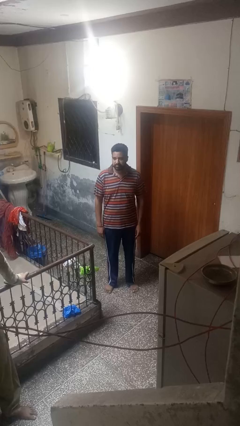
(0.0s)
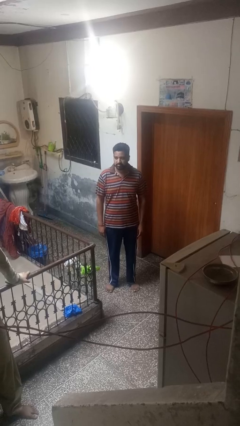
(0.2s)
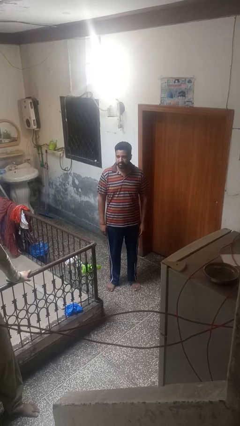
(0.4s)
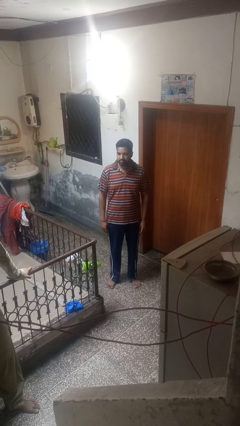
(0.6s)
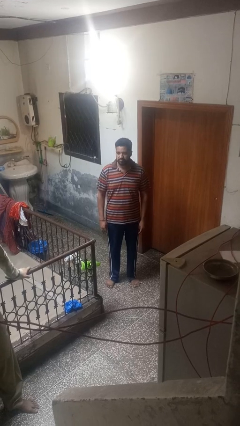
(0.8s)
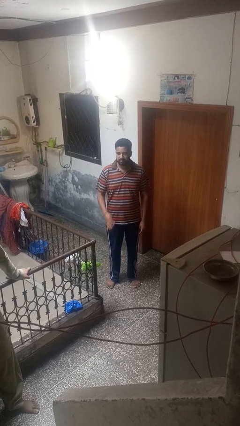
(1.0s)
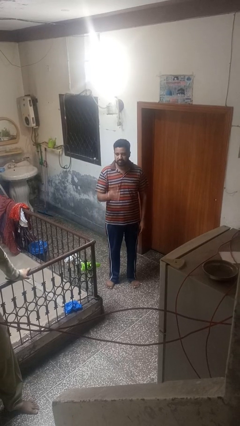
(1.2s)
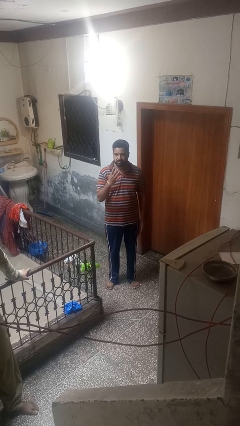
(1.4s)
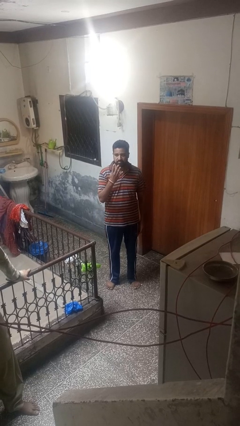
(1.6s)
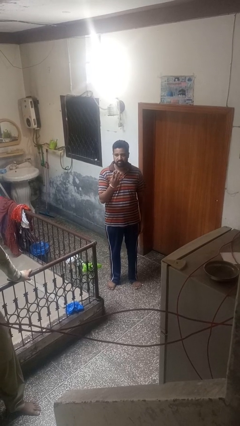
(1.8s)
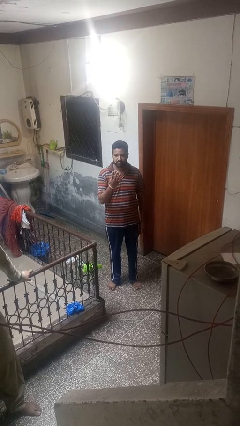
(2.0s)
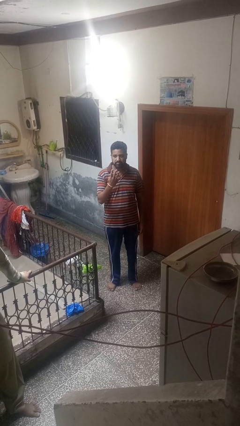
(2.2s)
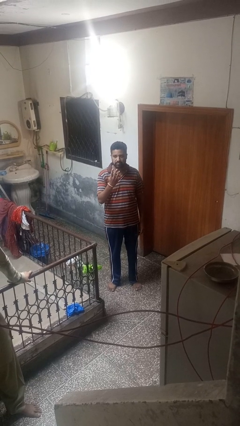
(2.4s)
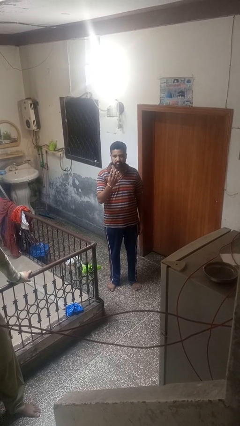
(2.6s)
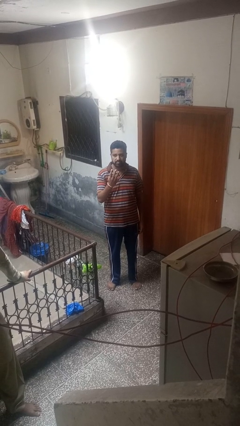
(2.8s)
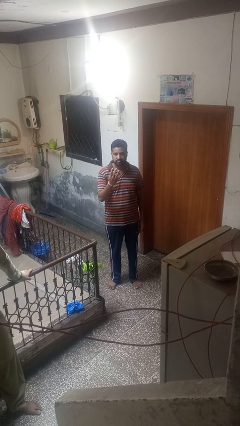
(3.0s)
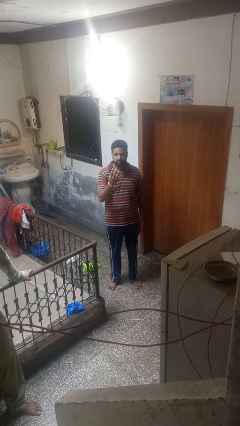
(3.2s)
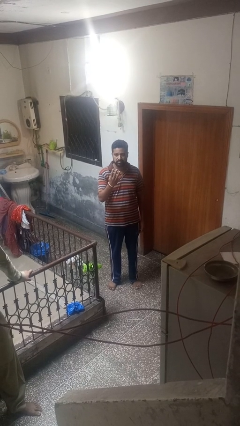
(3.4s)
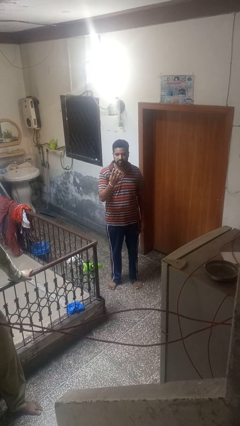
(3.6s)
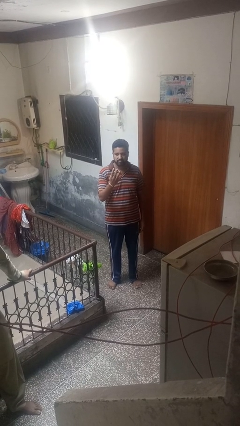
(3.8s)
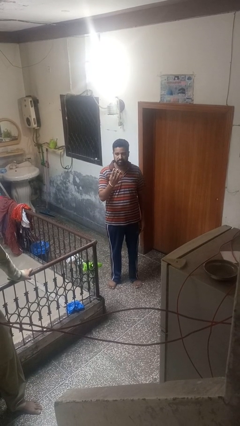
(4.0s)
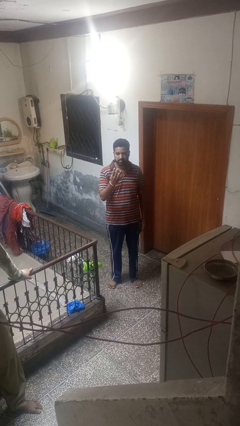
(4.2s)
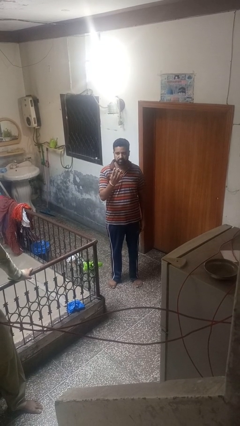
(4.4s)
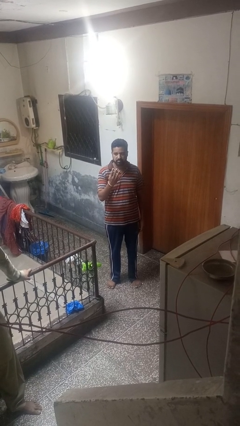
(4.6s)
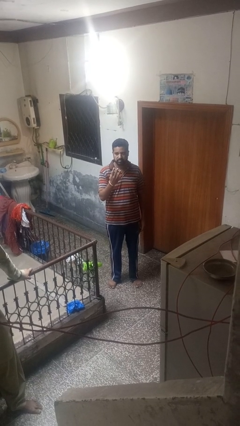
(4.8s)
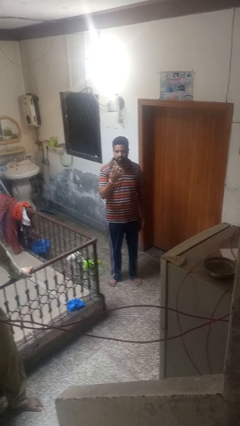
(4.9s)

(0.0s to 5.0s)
person gestures number four

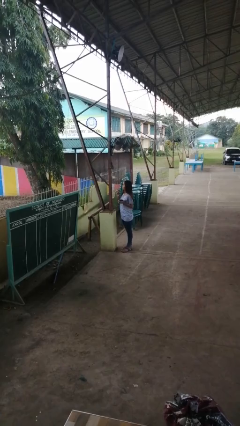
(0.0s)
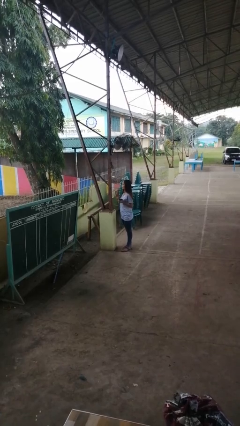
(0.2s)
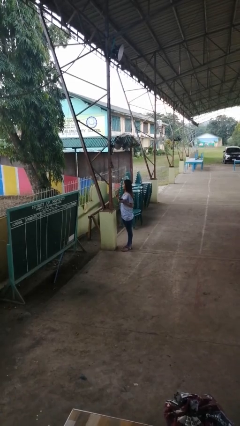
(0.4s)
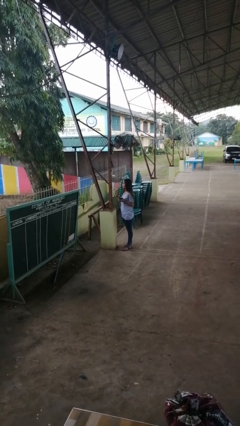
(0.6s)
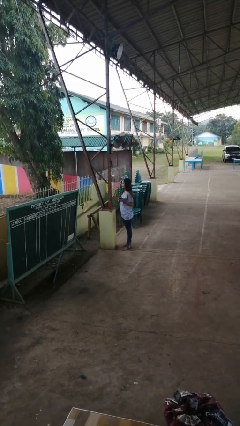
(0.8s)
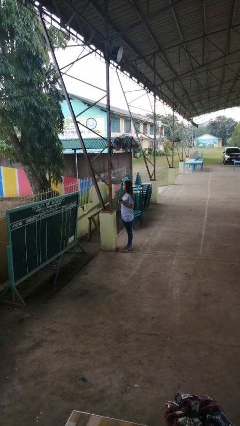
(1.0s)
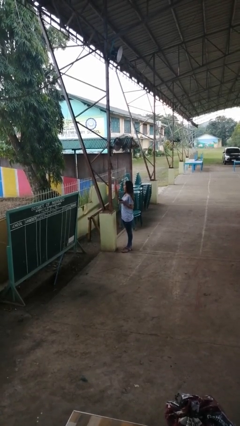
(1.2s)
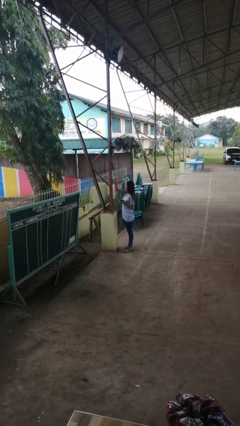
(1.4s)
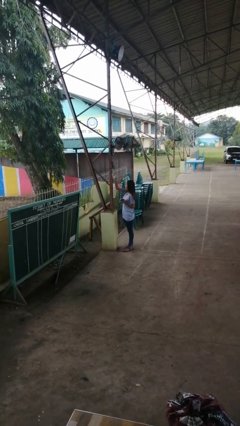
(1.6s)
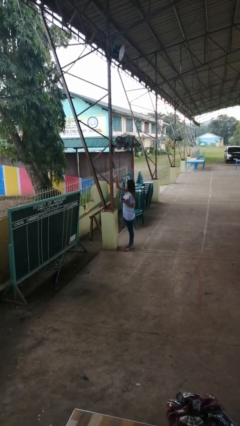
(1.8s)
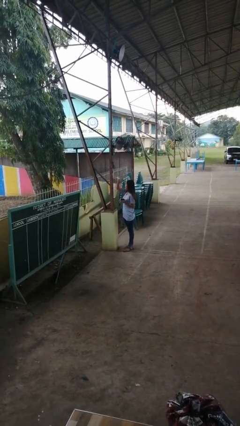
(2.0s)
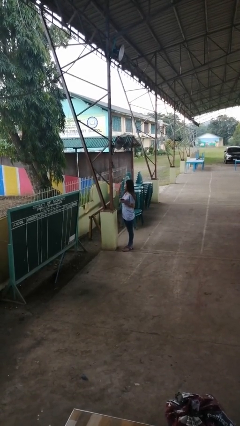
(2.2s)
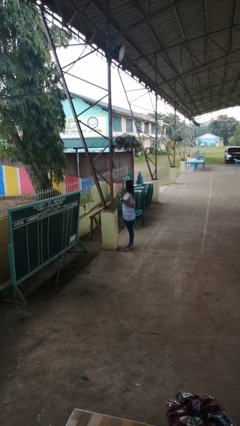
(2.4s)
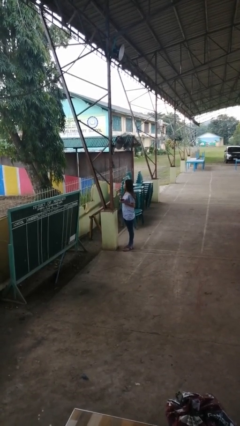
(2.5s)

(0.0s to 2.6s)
person unplugs from electrical socket

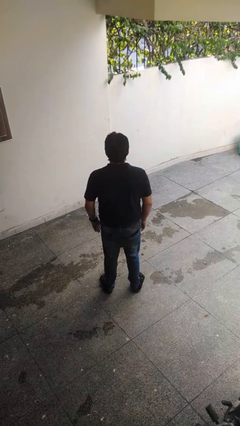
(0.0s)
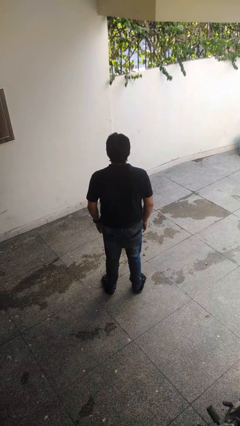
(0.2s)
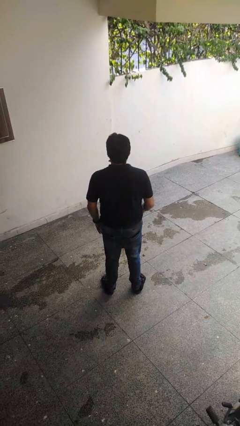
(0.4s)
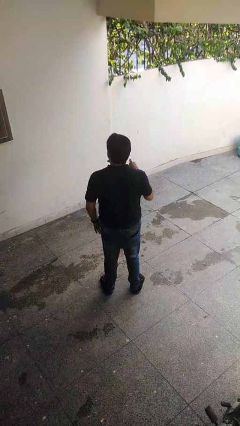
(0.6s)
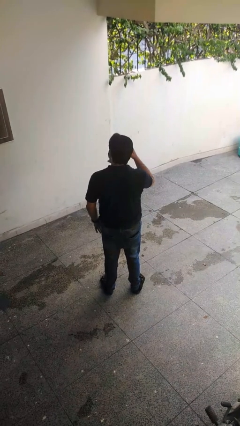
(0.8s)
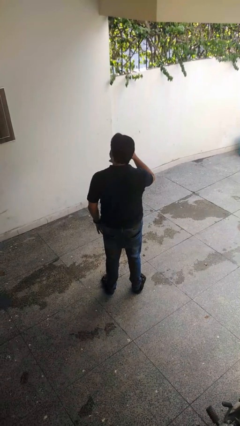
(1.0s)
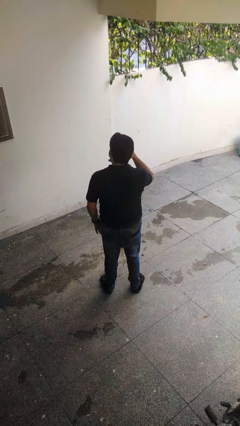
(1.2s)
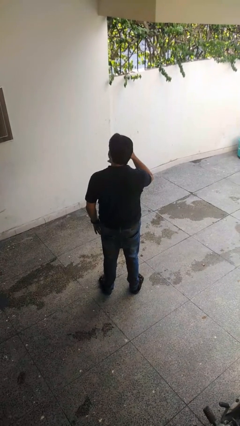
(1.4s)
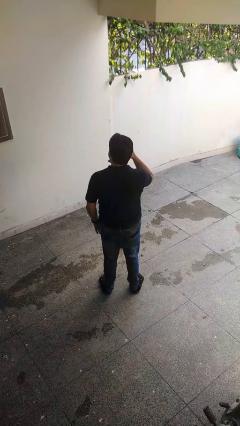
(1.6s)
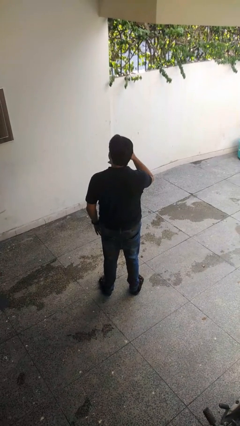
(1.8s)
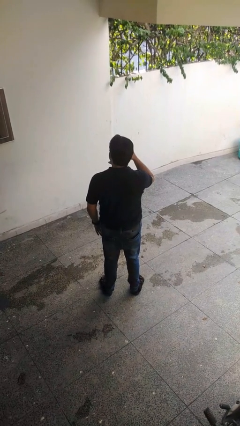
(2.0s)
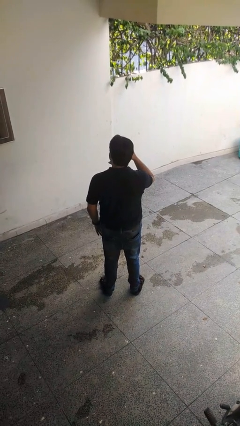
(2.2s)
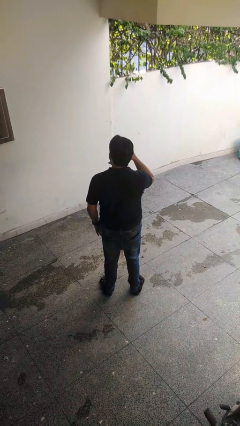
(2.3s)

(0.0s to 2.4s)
person gestures call me

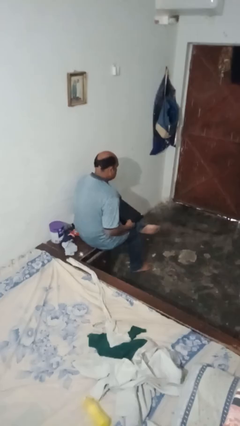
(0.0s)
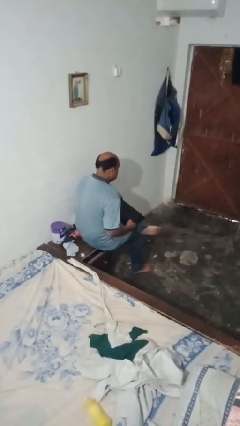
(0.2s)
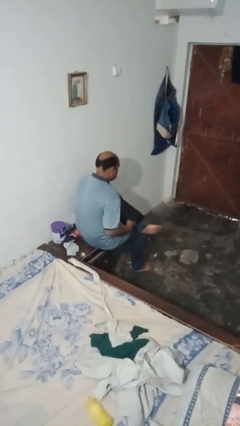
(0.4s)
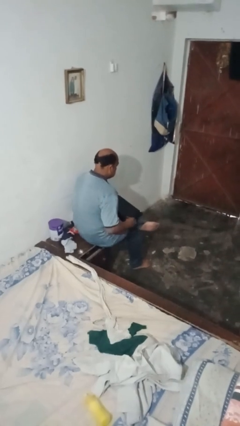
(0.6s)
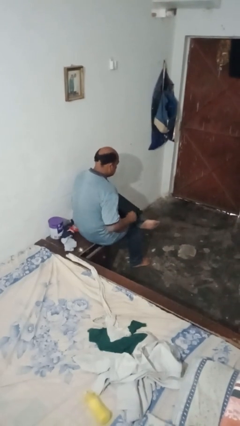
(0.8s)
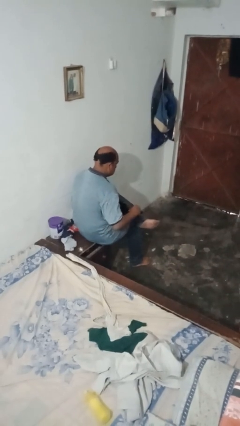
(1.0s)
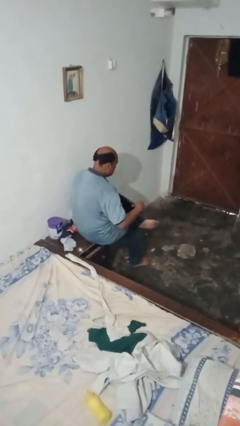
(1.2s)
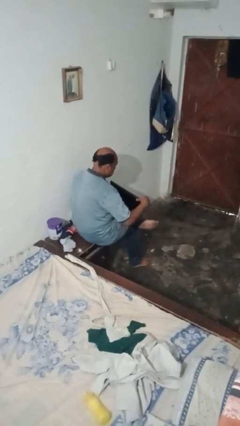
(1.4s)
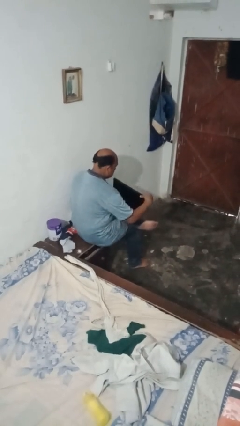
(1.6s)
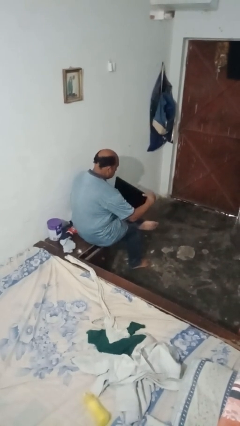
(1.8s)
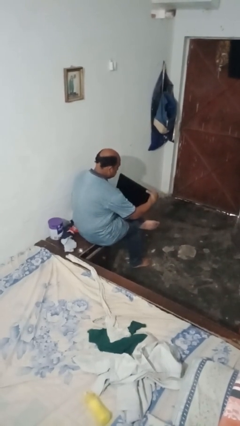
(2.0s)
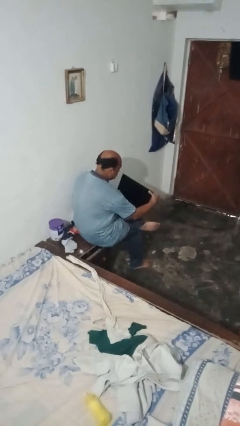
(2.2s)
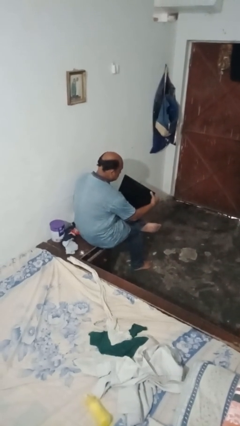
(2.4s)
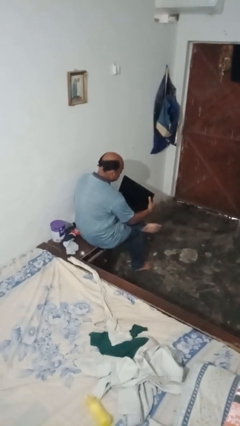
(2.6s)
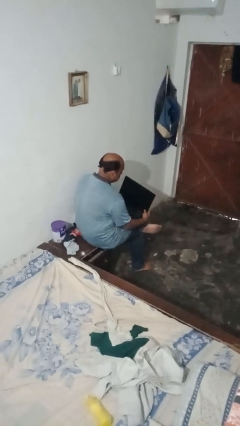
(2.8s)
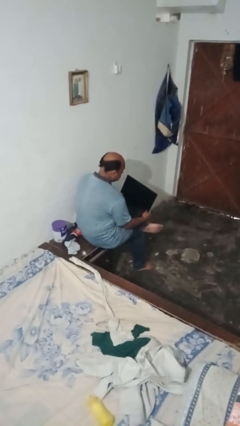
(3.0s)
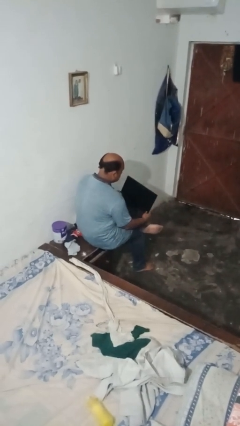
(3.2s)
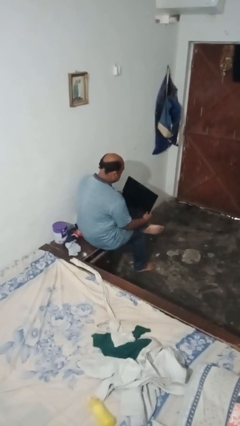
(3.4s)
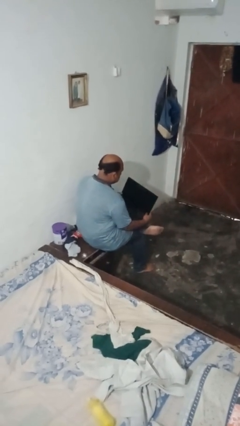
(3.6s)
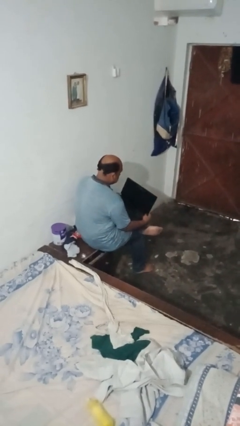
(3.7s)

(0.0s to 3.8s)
person opens laptop

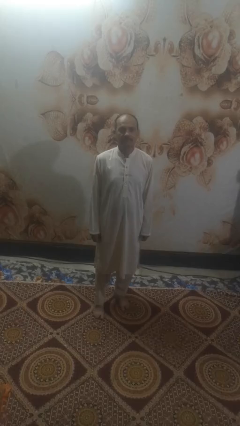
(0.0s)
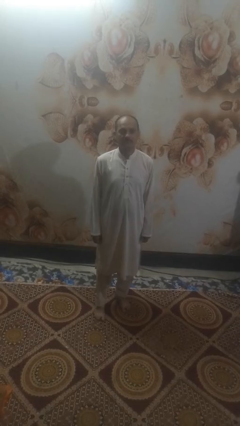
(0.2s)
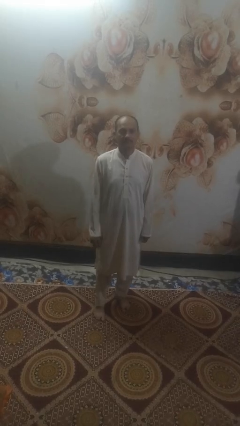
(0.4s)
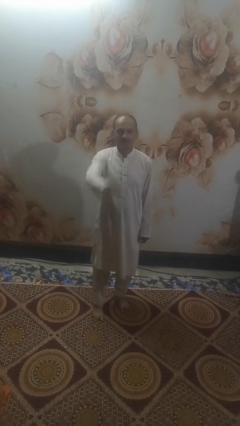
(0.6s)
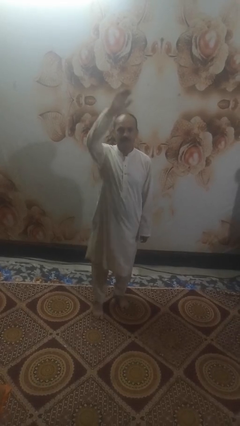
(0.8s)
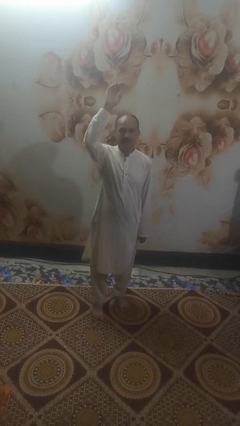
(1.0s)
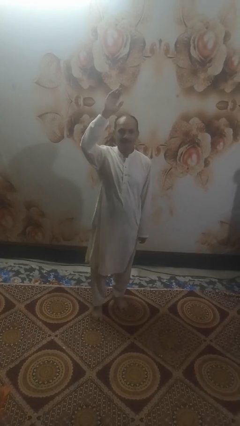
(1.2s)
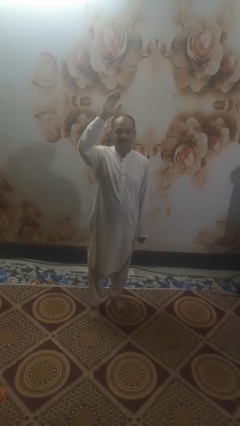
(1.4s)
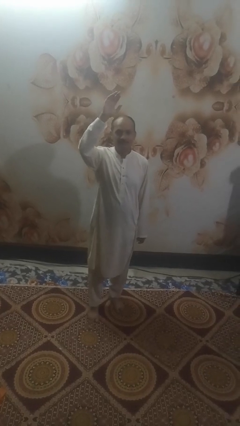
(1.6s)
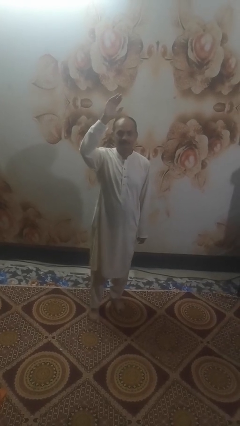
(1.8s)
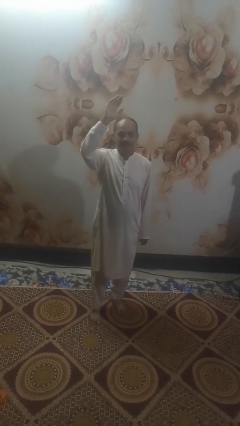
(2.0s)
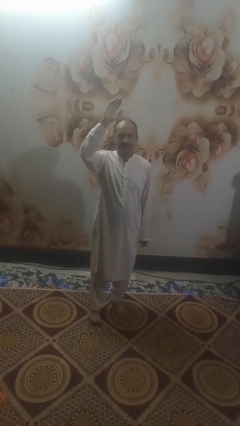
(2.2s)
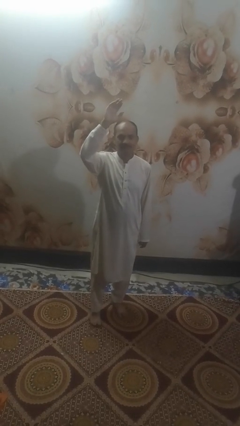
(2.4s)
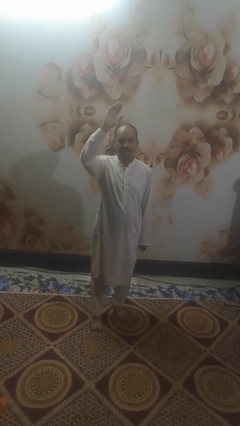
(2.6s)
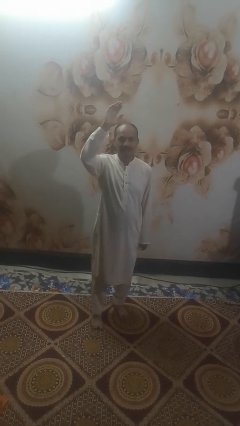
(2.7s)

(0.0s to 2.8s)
person gestures swipe up

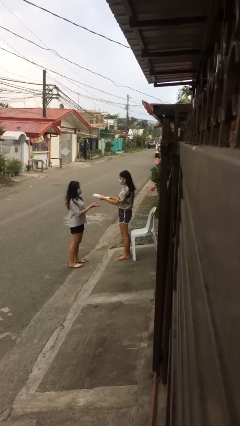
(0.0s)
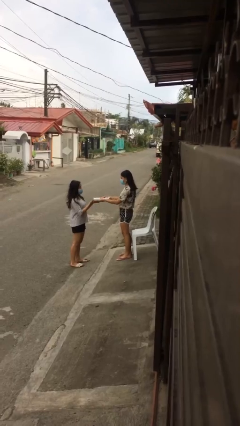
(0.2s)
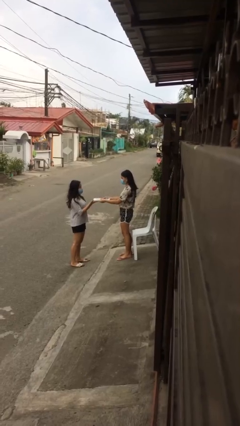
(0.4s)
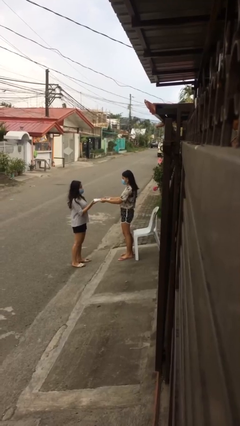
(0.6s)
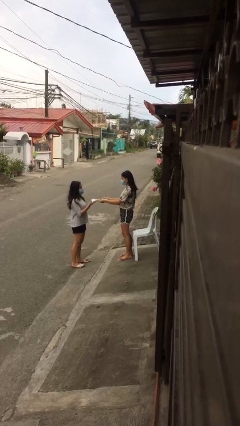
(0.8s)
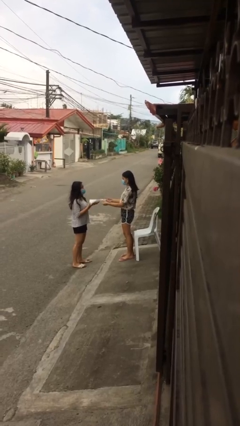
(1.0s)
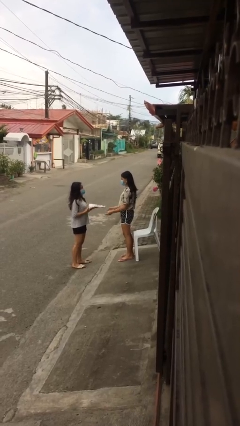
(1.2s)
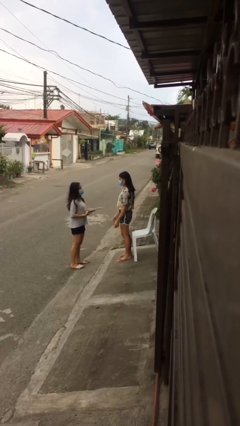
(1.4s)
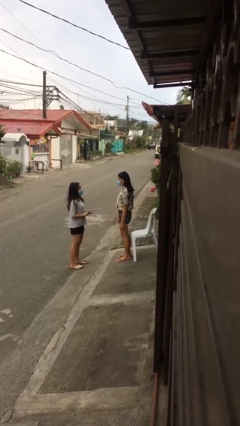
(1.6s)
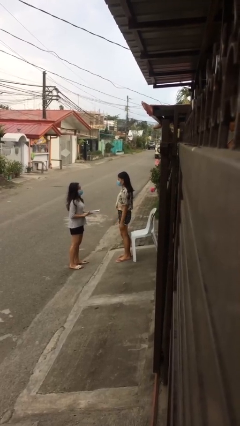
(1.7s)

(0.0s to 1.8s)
person transfers object to person
